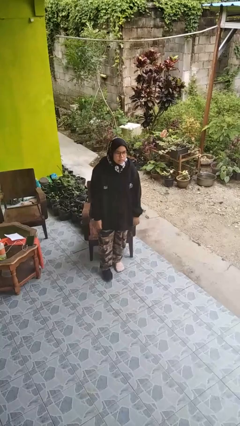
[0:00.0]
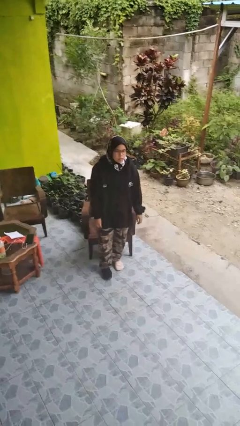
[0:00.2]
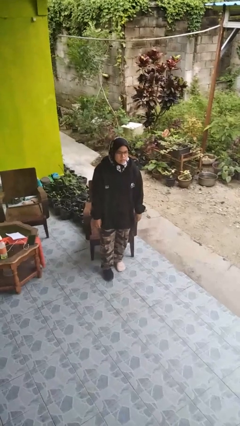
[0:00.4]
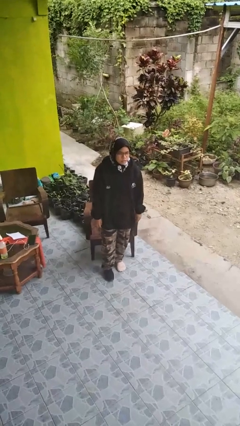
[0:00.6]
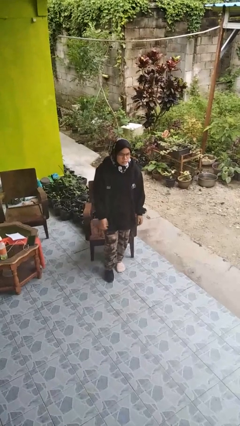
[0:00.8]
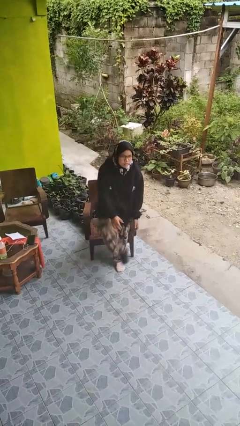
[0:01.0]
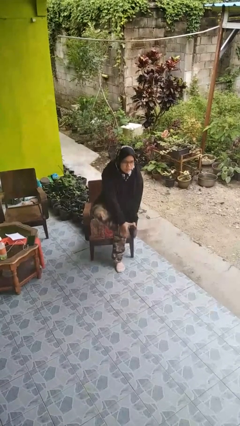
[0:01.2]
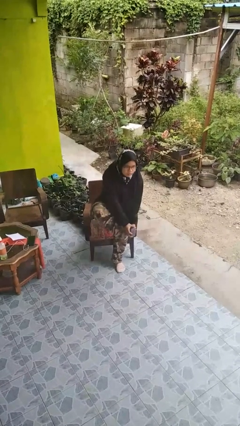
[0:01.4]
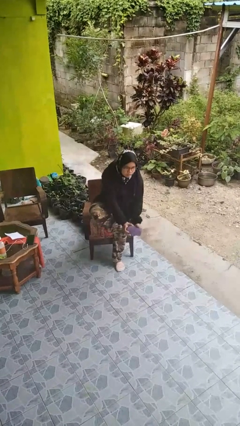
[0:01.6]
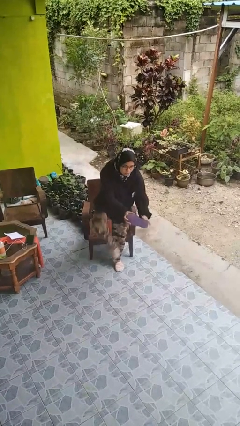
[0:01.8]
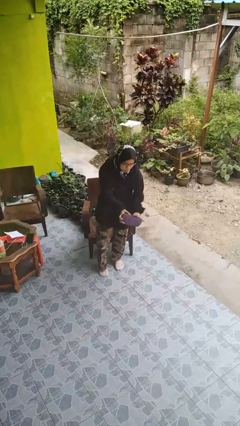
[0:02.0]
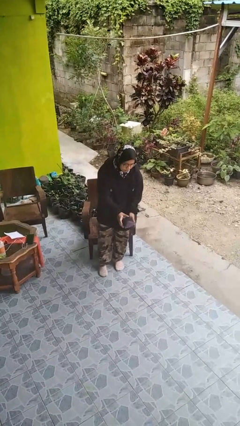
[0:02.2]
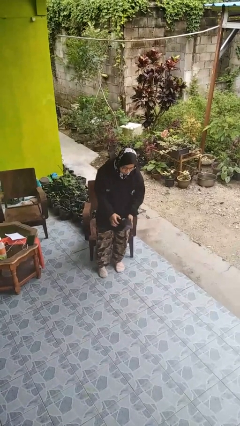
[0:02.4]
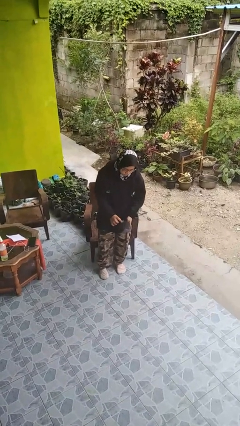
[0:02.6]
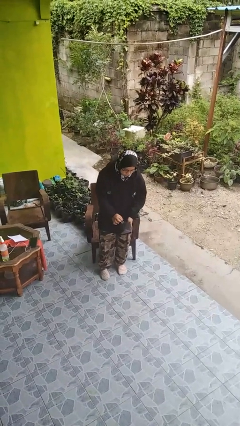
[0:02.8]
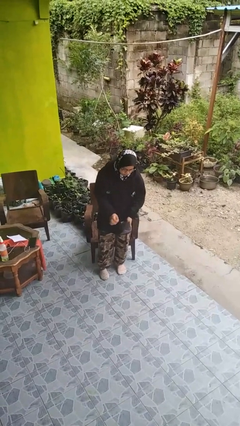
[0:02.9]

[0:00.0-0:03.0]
person takes off shoes

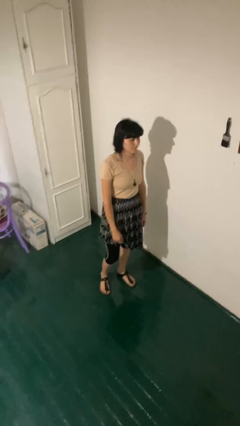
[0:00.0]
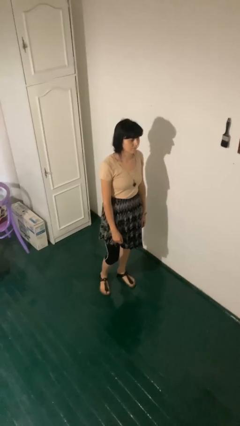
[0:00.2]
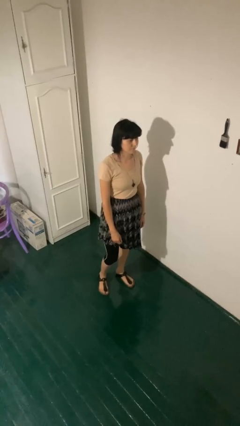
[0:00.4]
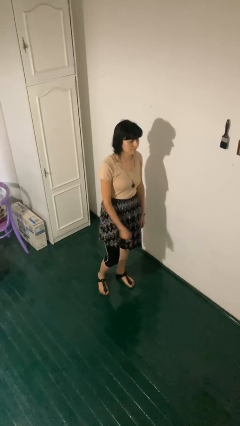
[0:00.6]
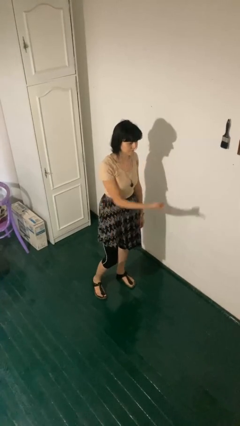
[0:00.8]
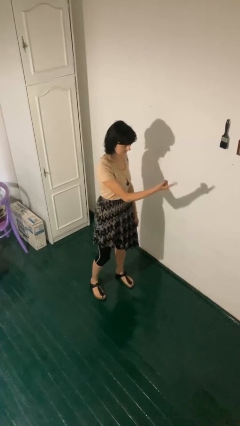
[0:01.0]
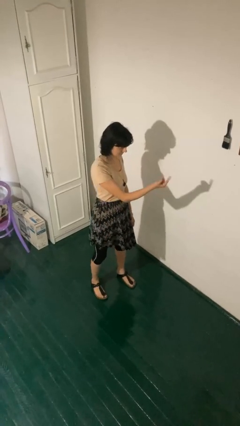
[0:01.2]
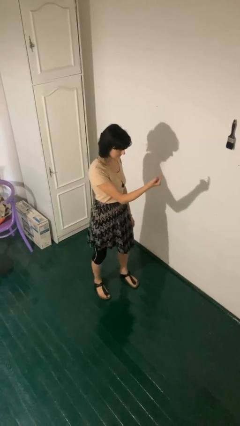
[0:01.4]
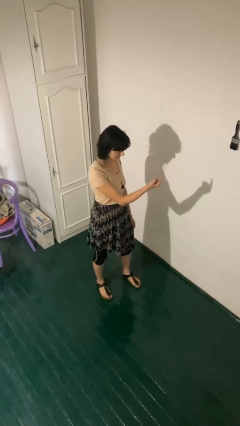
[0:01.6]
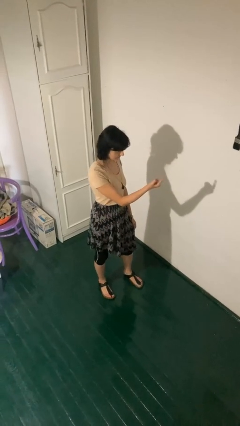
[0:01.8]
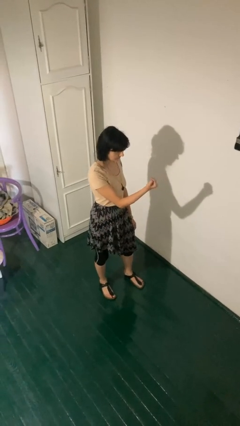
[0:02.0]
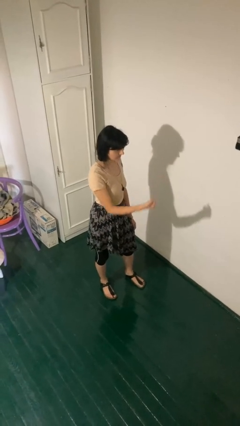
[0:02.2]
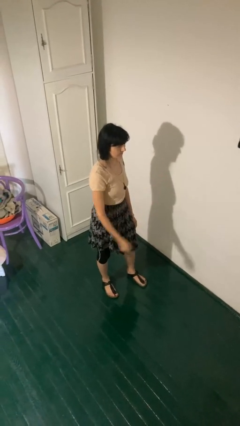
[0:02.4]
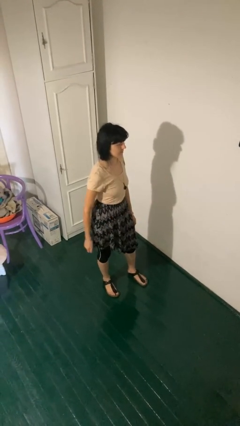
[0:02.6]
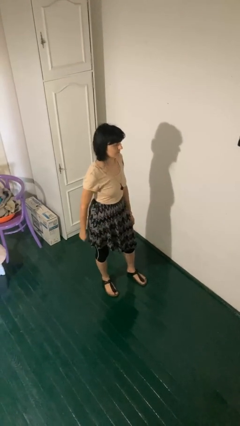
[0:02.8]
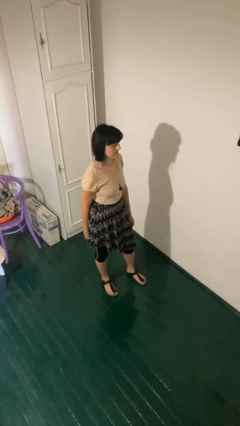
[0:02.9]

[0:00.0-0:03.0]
person gestures come here

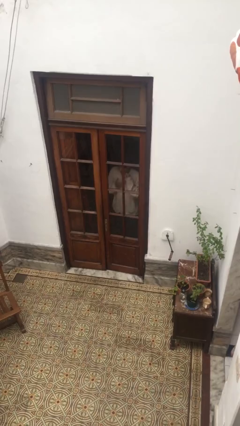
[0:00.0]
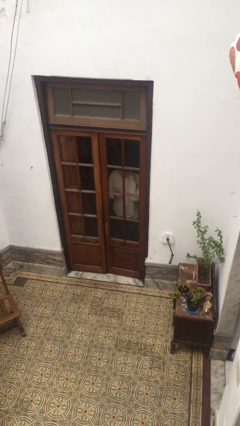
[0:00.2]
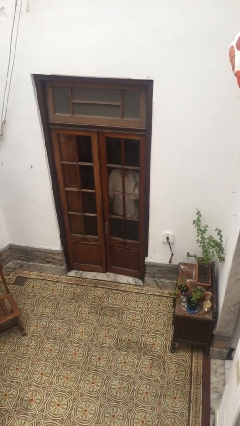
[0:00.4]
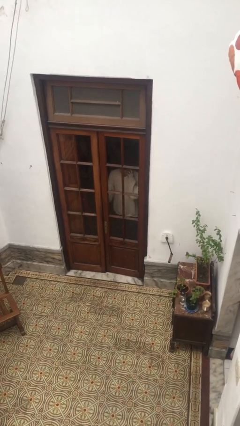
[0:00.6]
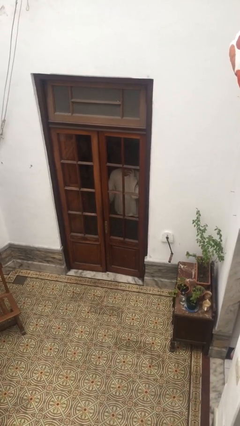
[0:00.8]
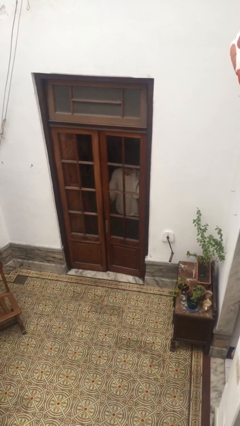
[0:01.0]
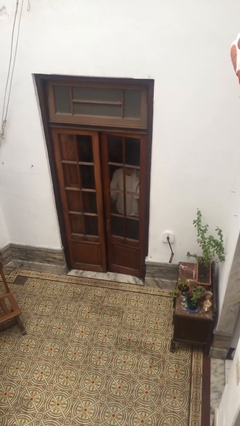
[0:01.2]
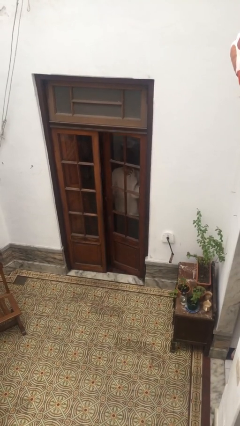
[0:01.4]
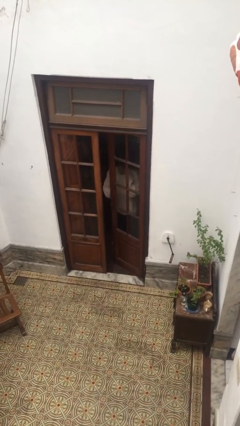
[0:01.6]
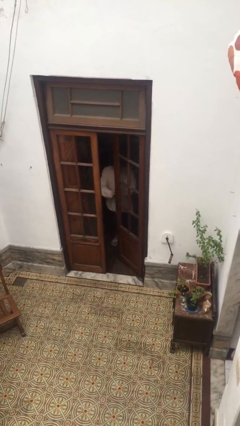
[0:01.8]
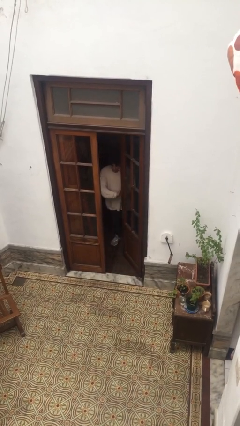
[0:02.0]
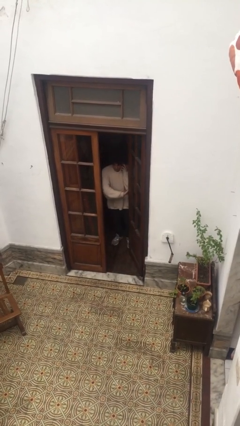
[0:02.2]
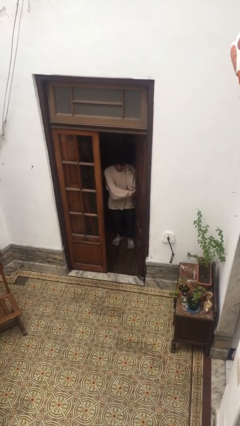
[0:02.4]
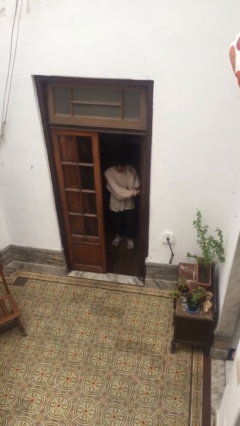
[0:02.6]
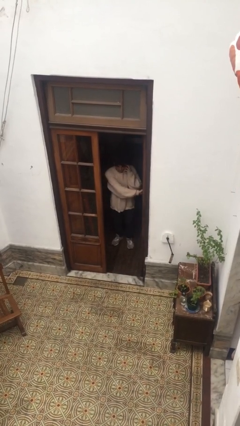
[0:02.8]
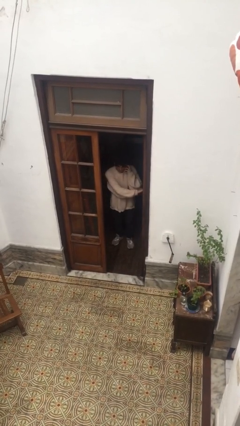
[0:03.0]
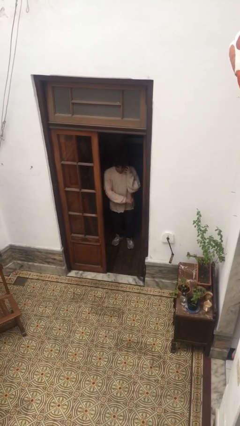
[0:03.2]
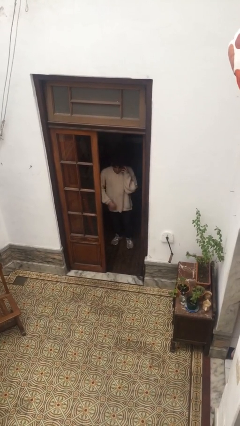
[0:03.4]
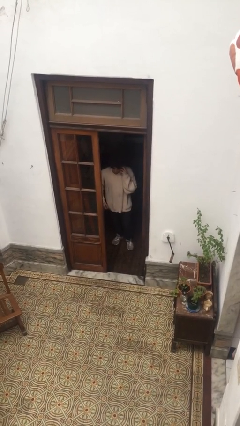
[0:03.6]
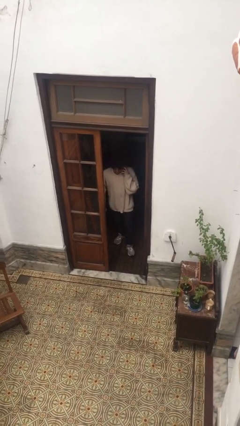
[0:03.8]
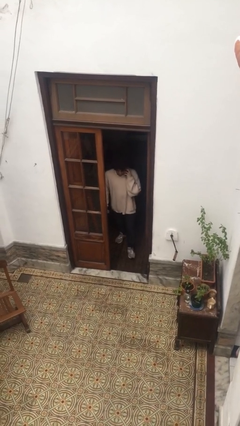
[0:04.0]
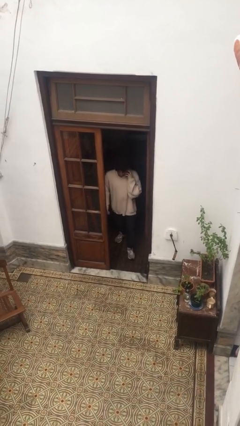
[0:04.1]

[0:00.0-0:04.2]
person opens facility door

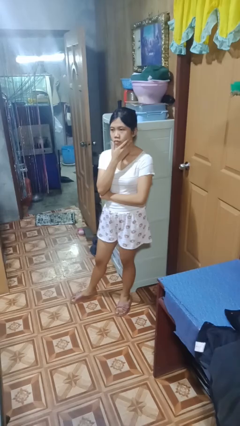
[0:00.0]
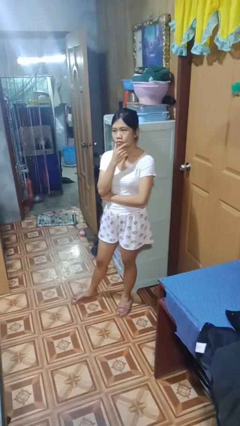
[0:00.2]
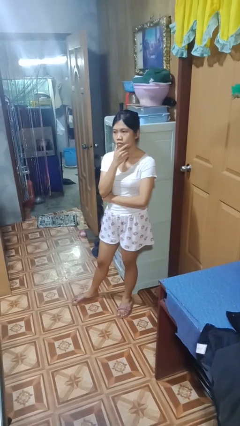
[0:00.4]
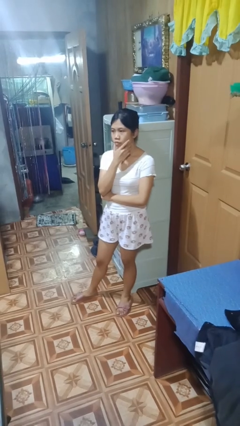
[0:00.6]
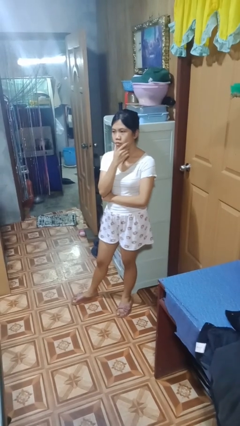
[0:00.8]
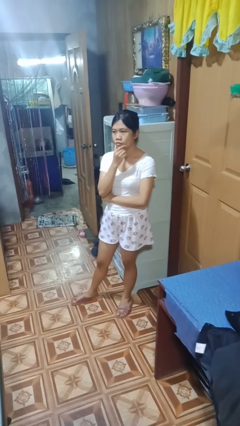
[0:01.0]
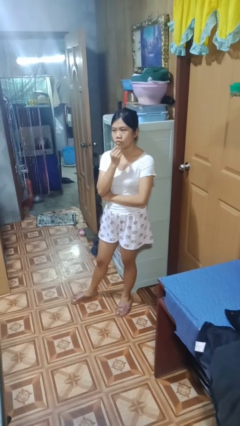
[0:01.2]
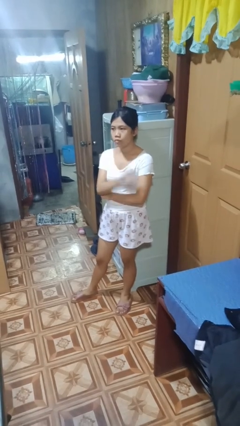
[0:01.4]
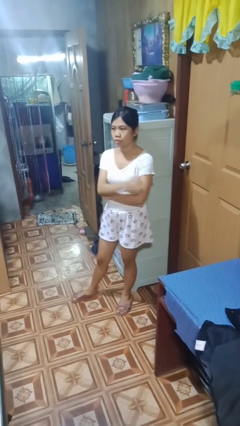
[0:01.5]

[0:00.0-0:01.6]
person strokes chin

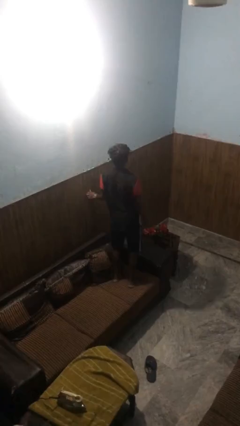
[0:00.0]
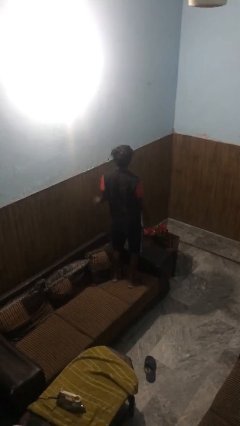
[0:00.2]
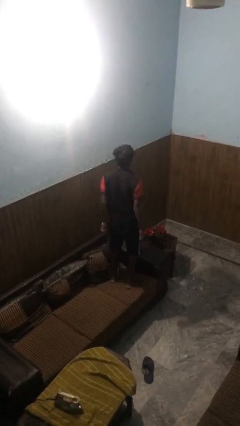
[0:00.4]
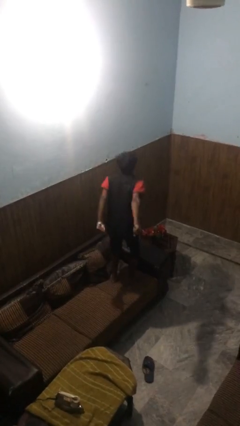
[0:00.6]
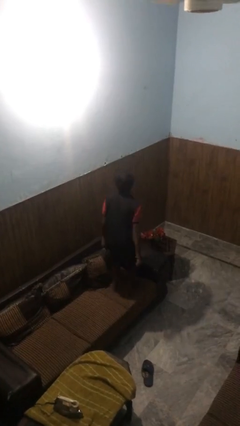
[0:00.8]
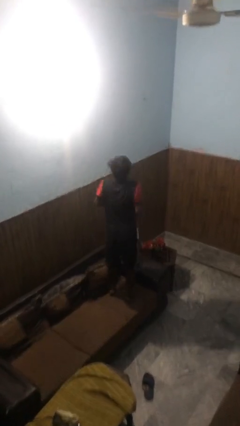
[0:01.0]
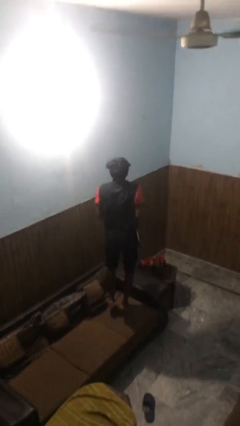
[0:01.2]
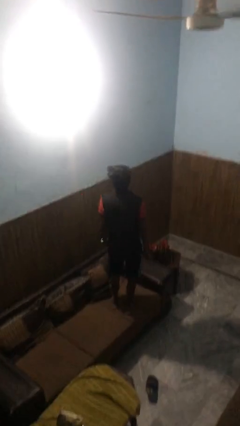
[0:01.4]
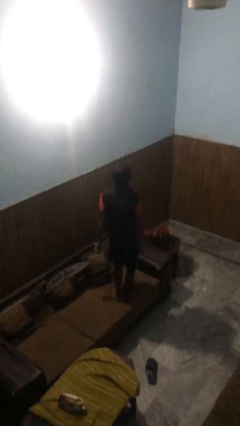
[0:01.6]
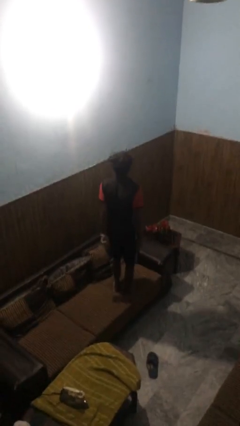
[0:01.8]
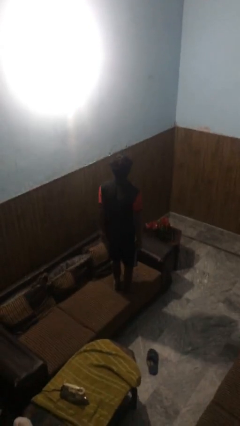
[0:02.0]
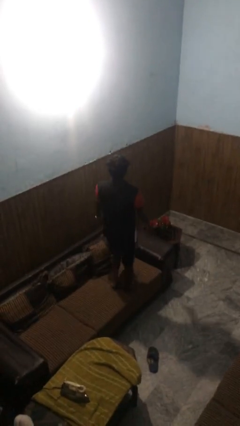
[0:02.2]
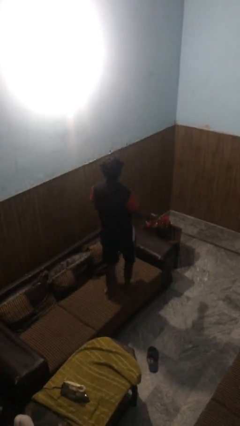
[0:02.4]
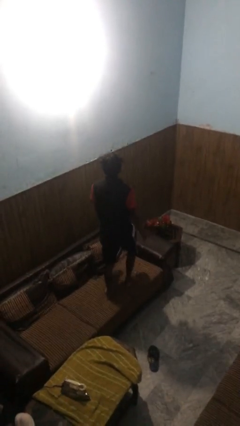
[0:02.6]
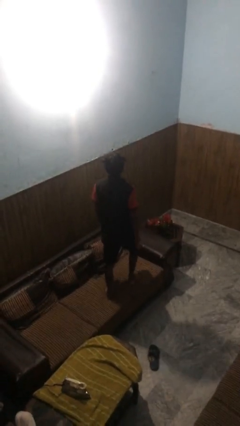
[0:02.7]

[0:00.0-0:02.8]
person jumps on couch

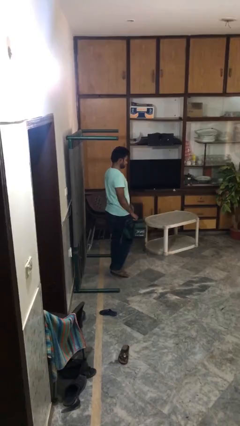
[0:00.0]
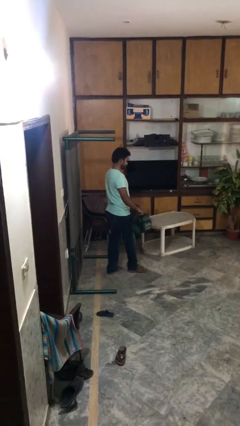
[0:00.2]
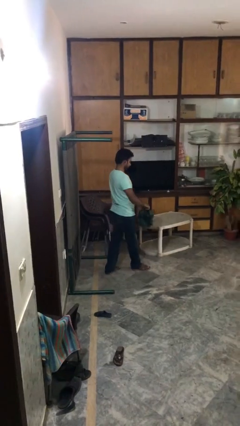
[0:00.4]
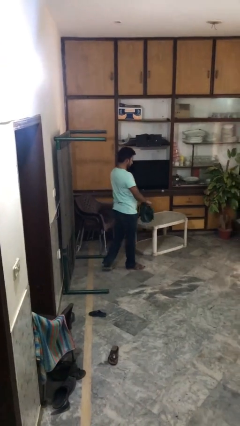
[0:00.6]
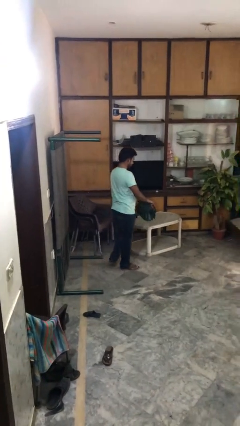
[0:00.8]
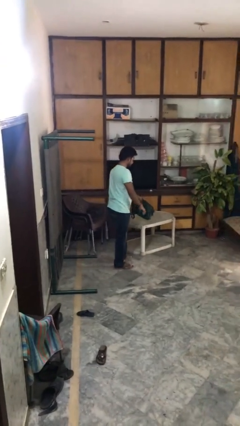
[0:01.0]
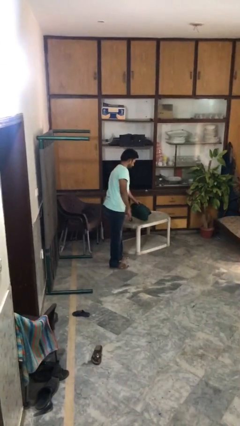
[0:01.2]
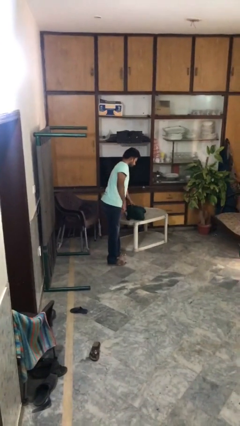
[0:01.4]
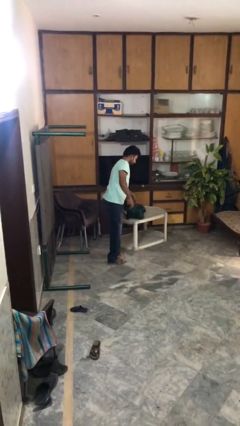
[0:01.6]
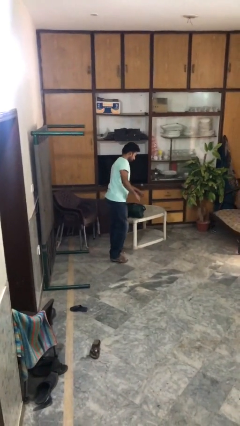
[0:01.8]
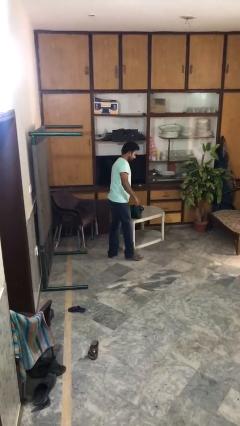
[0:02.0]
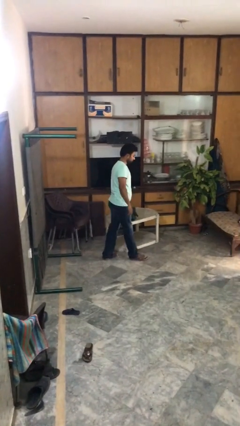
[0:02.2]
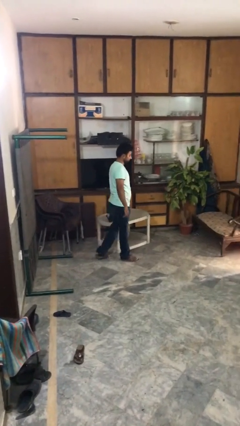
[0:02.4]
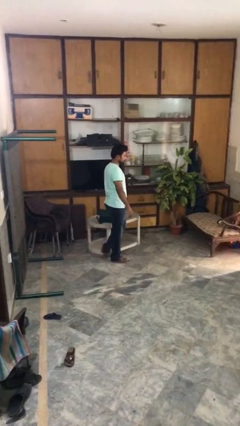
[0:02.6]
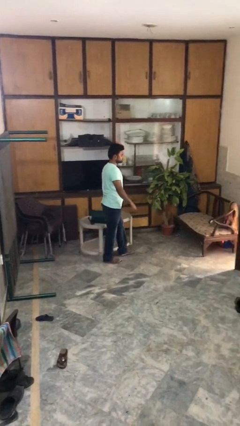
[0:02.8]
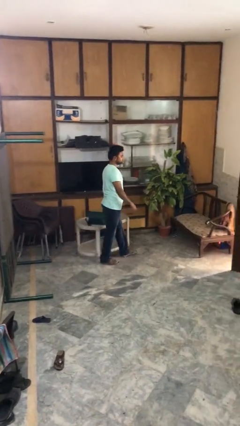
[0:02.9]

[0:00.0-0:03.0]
person puts down object on table

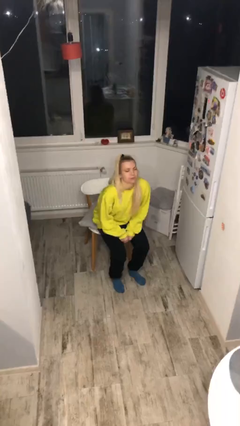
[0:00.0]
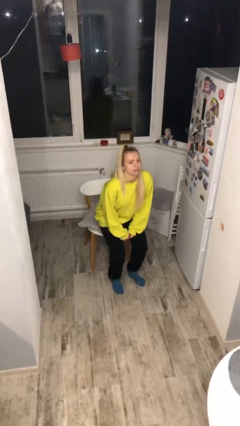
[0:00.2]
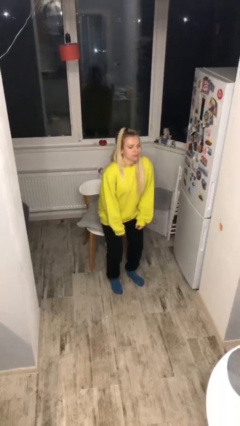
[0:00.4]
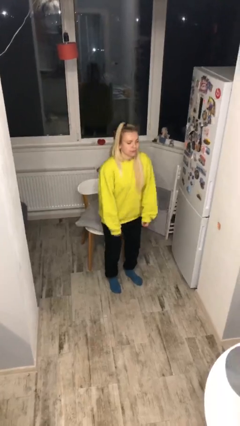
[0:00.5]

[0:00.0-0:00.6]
person stands up
